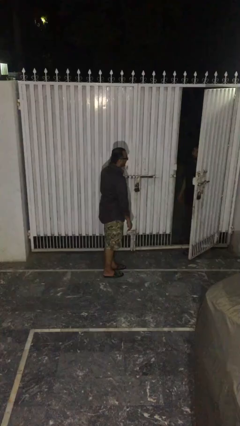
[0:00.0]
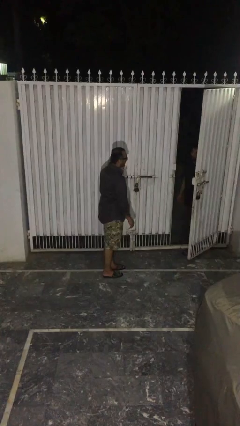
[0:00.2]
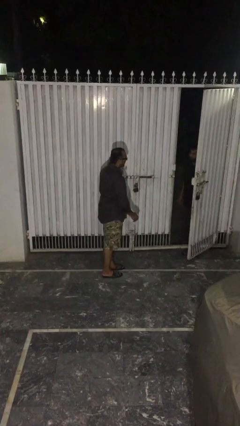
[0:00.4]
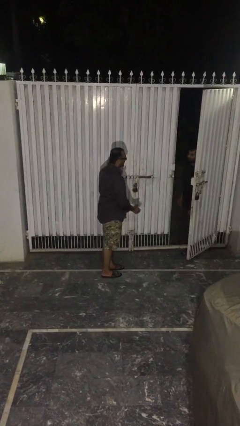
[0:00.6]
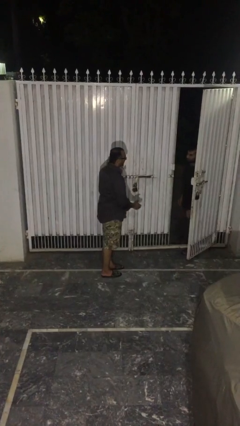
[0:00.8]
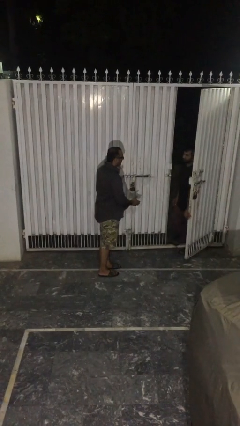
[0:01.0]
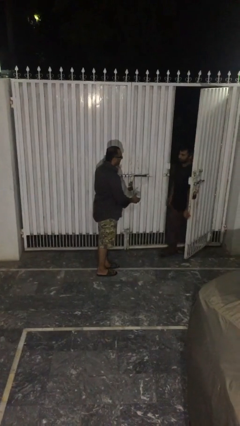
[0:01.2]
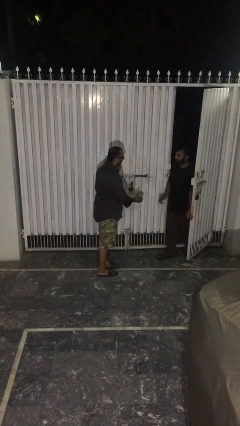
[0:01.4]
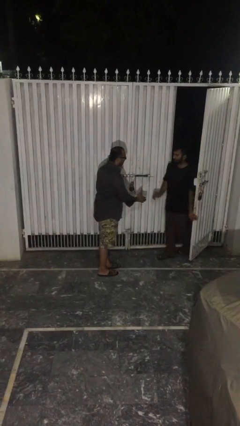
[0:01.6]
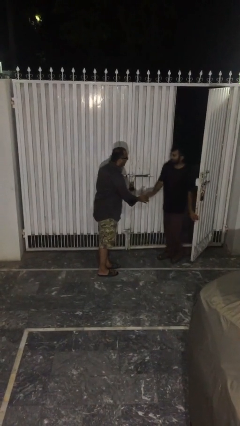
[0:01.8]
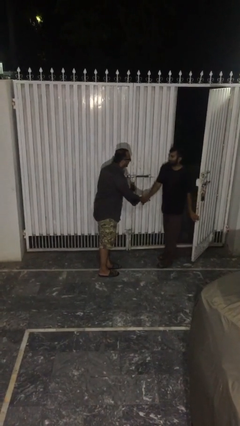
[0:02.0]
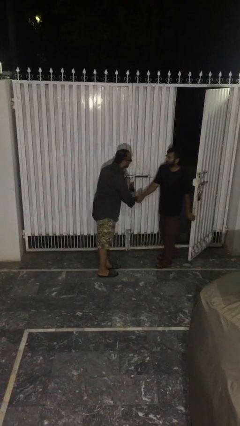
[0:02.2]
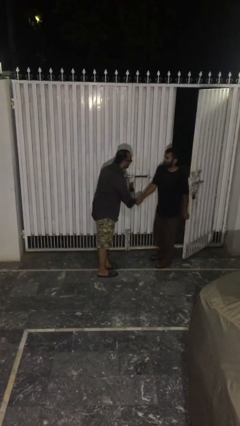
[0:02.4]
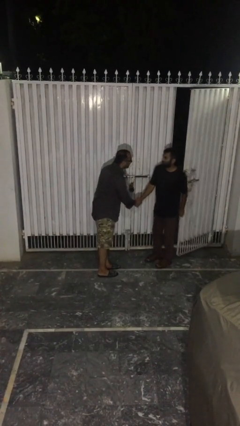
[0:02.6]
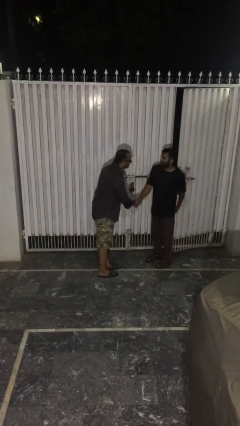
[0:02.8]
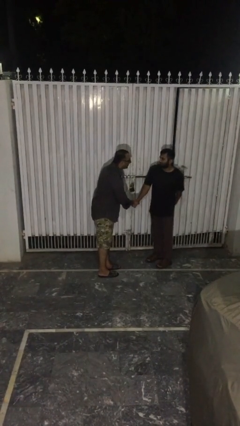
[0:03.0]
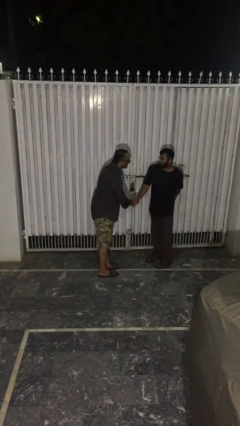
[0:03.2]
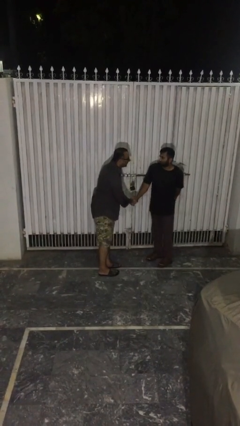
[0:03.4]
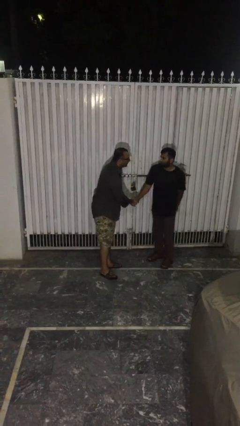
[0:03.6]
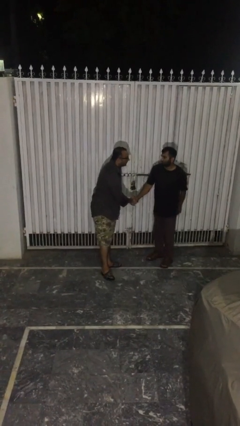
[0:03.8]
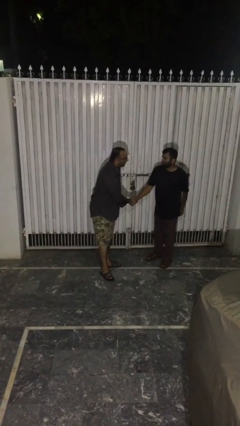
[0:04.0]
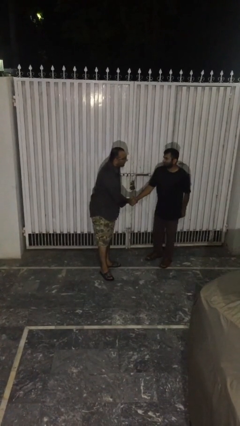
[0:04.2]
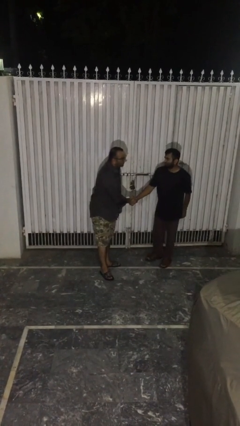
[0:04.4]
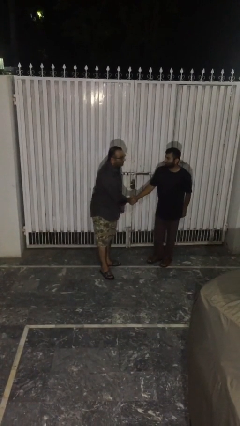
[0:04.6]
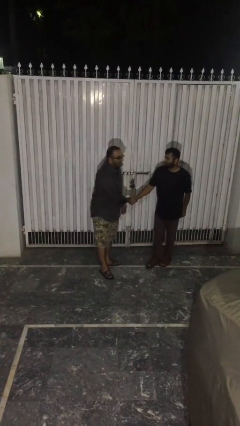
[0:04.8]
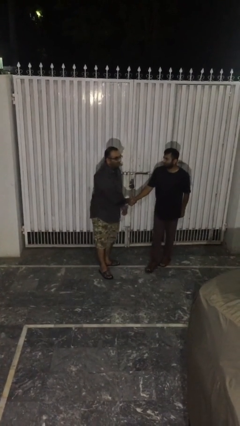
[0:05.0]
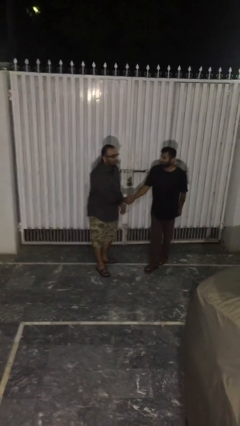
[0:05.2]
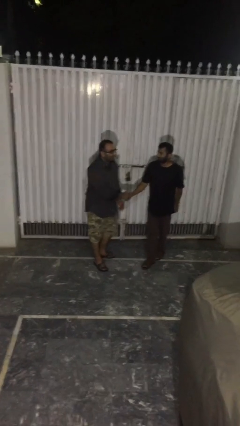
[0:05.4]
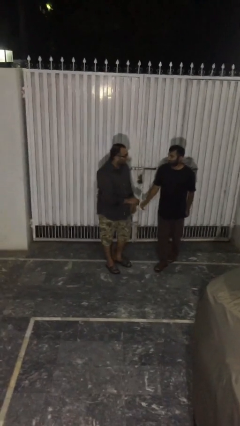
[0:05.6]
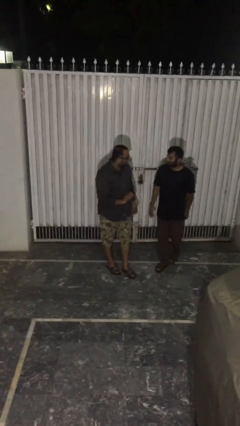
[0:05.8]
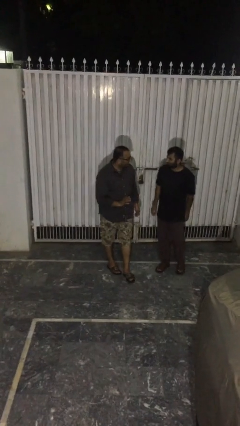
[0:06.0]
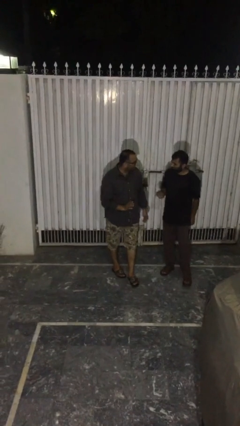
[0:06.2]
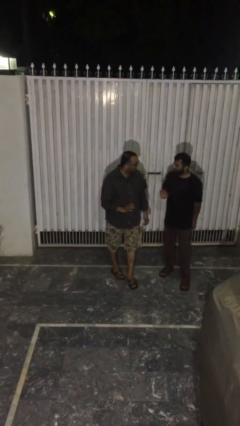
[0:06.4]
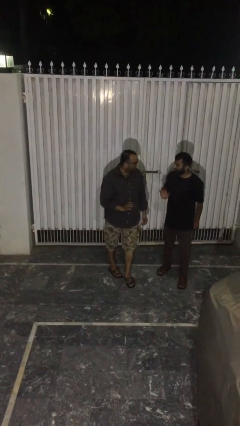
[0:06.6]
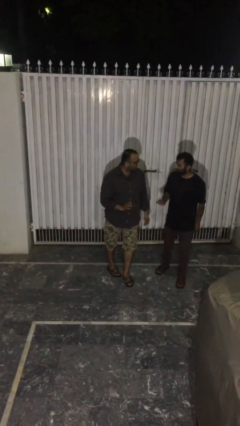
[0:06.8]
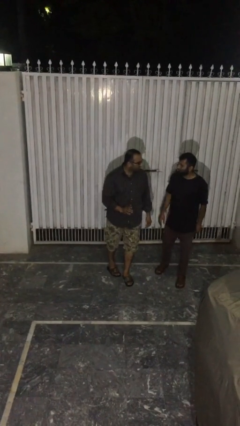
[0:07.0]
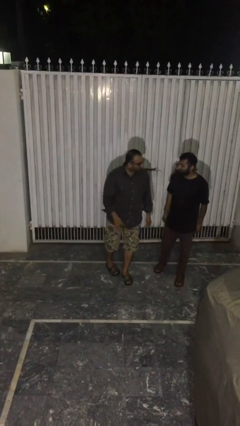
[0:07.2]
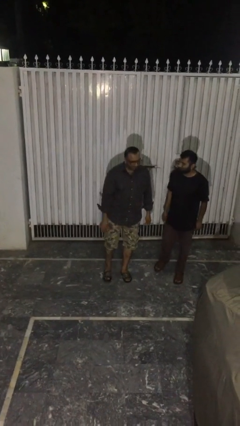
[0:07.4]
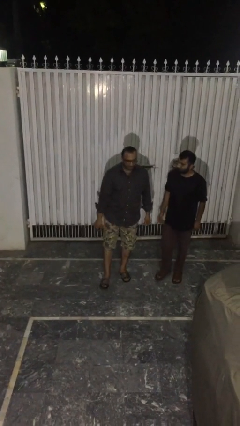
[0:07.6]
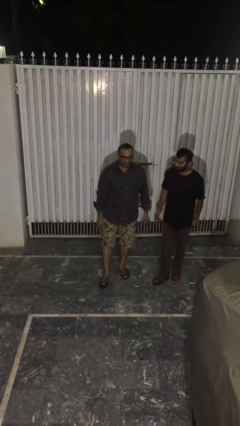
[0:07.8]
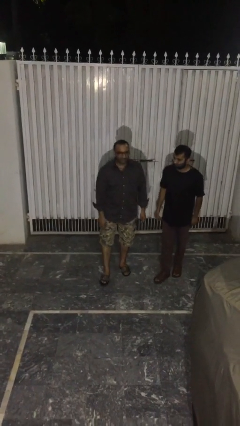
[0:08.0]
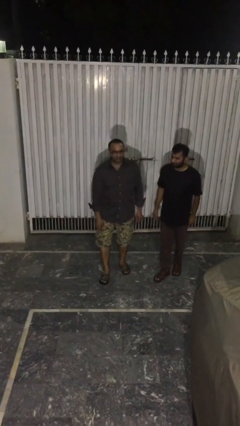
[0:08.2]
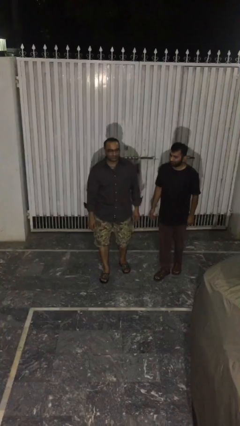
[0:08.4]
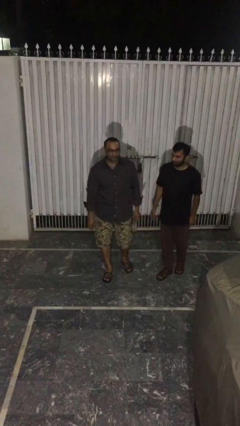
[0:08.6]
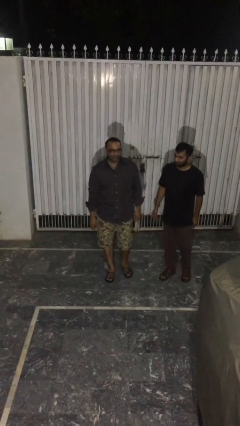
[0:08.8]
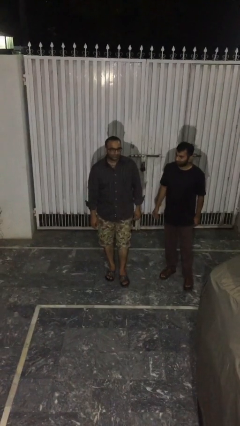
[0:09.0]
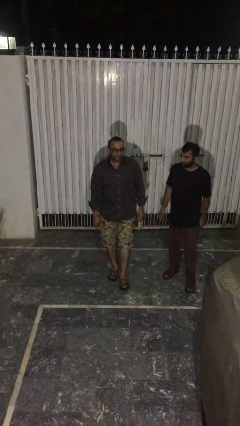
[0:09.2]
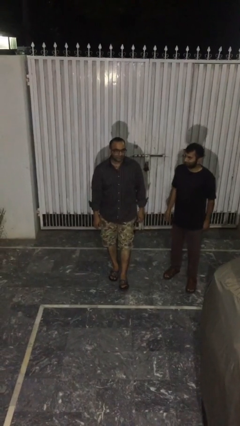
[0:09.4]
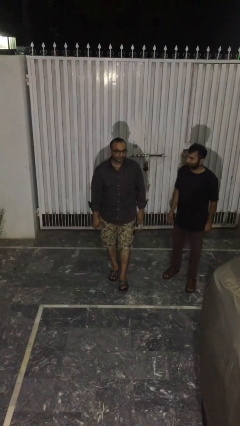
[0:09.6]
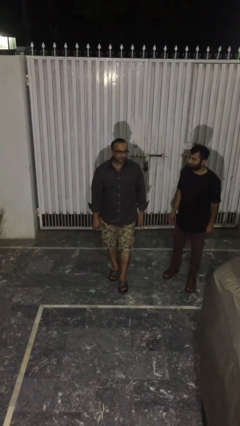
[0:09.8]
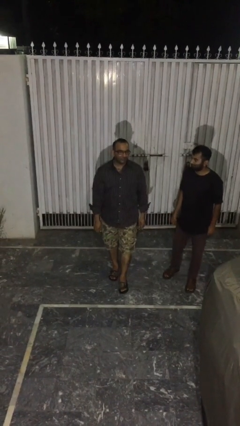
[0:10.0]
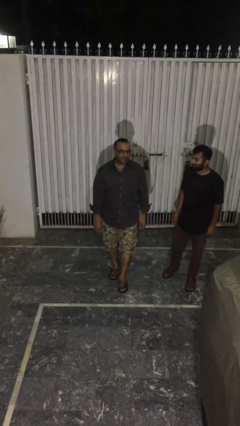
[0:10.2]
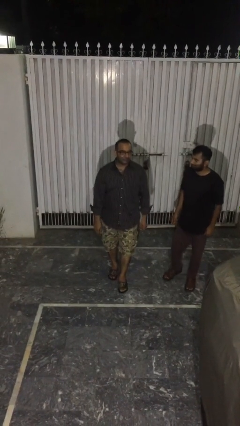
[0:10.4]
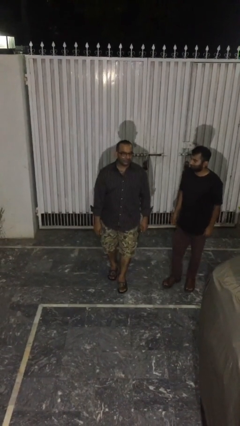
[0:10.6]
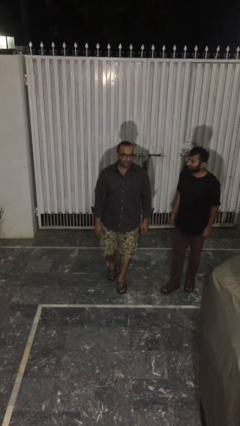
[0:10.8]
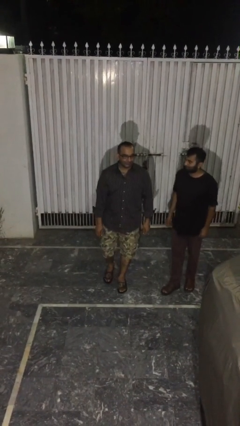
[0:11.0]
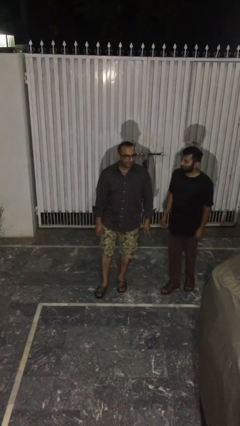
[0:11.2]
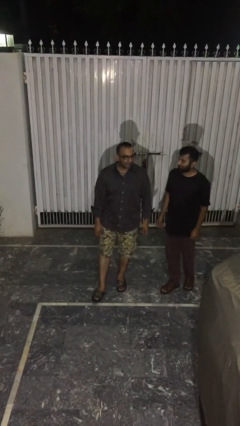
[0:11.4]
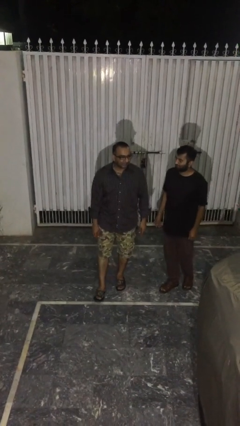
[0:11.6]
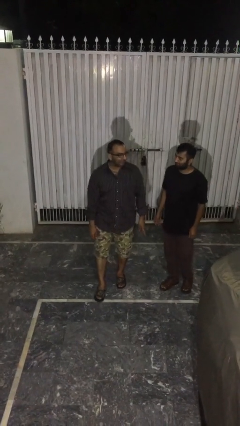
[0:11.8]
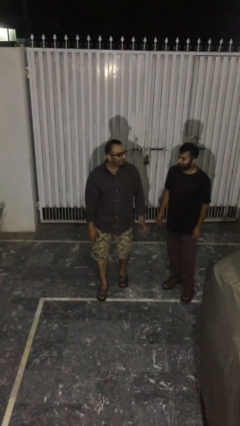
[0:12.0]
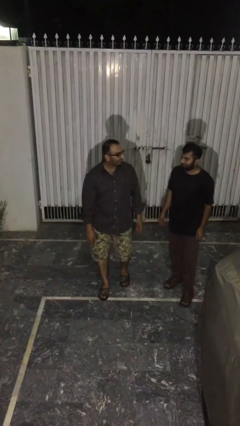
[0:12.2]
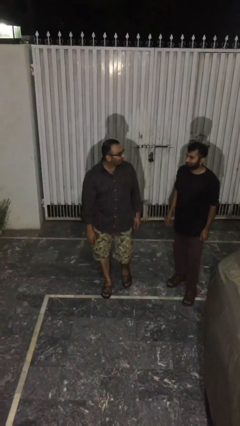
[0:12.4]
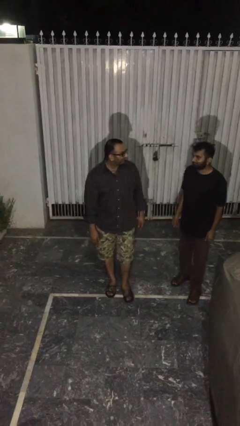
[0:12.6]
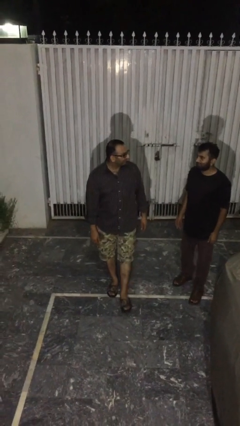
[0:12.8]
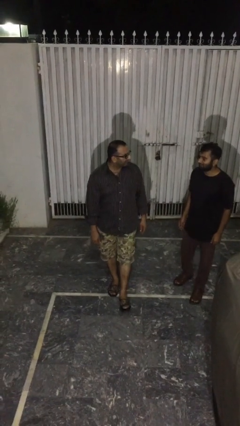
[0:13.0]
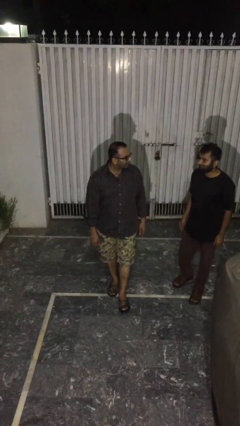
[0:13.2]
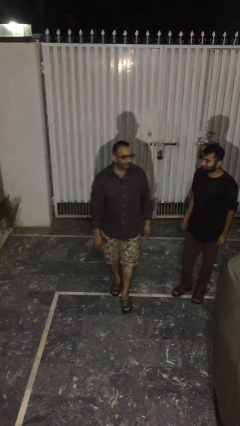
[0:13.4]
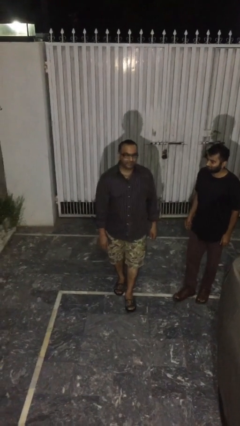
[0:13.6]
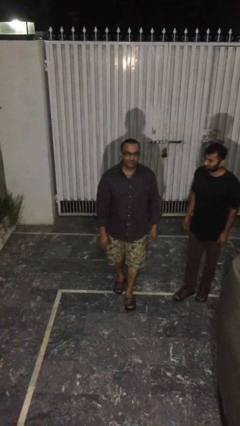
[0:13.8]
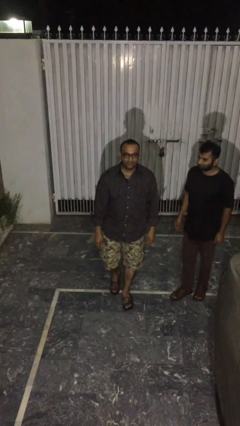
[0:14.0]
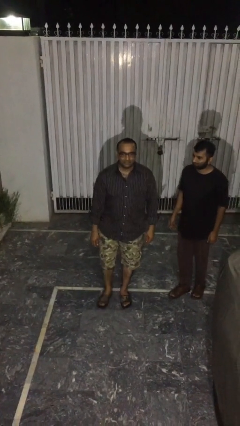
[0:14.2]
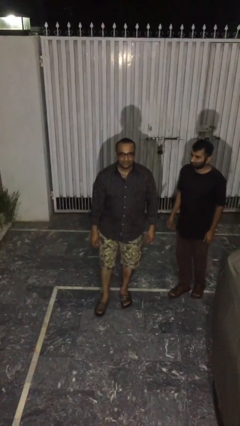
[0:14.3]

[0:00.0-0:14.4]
person shakes hand

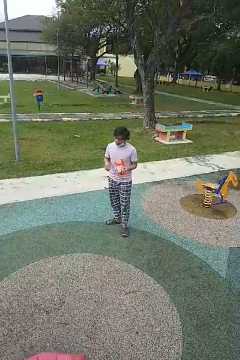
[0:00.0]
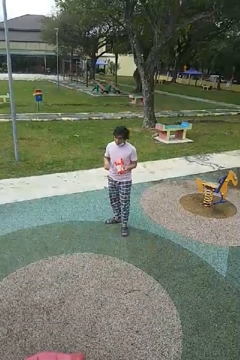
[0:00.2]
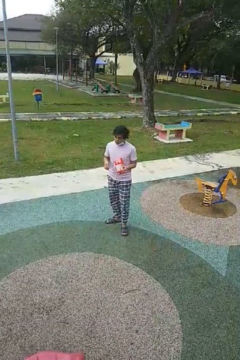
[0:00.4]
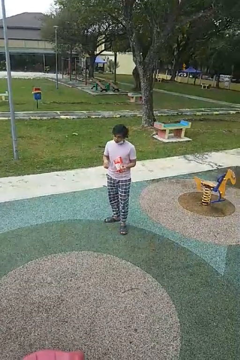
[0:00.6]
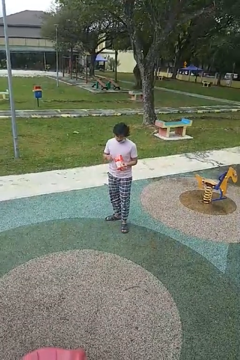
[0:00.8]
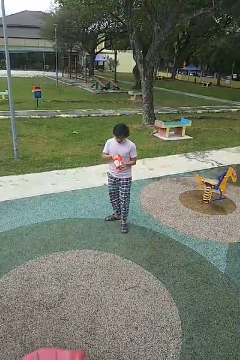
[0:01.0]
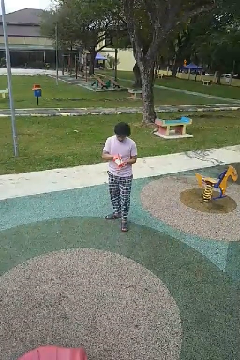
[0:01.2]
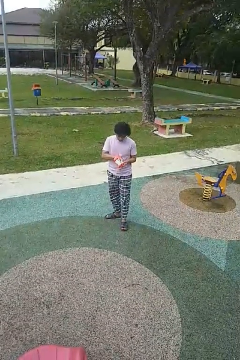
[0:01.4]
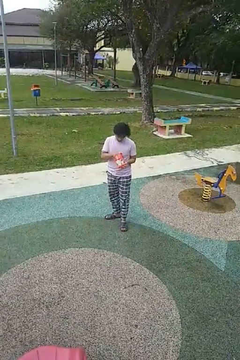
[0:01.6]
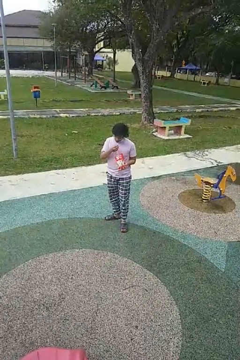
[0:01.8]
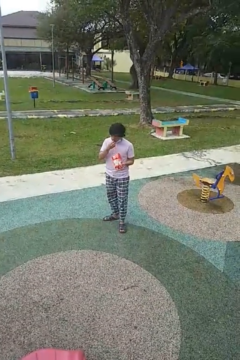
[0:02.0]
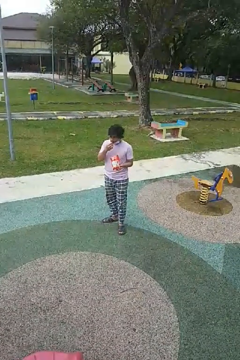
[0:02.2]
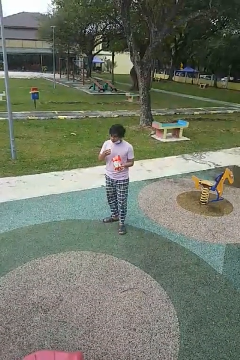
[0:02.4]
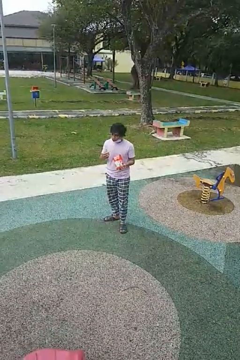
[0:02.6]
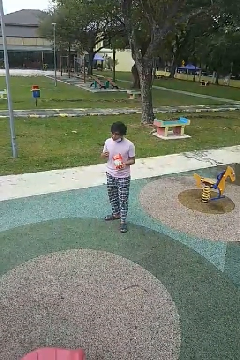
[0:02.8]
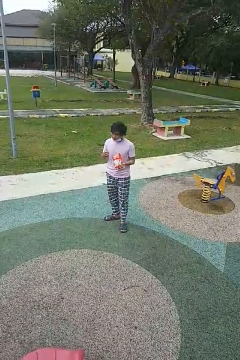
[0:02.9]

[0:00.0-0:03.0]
person eats snack from bag

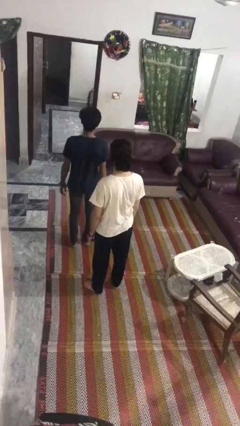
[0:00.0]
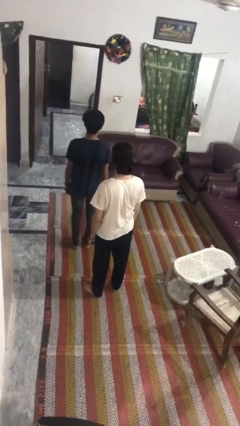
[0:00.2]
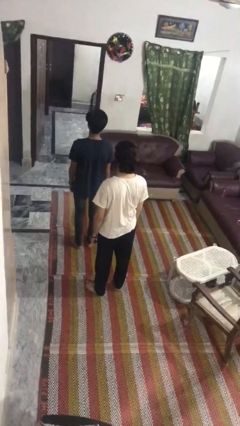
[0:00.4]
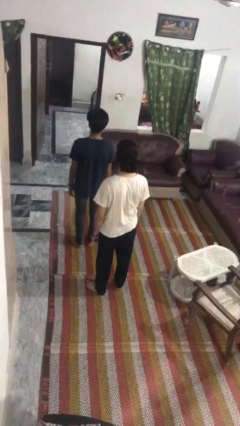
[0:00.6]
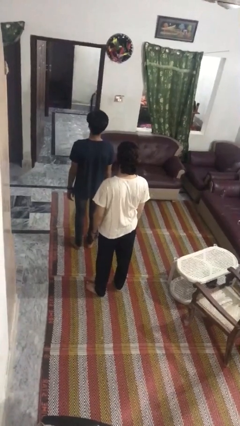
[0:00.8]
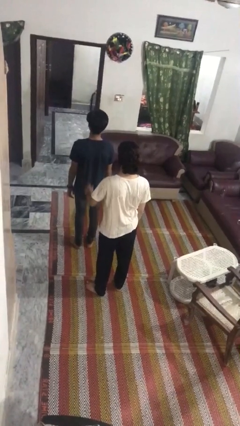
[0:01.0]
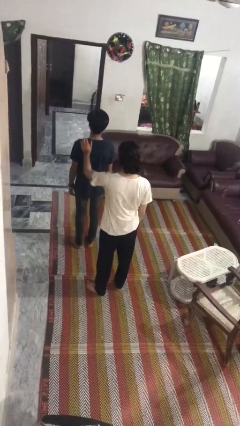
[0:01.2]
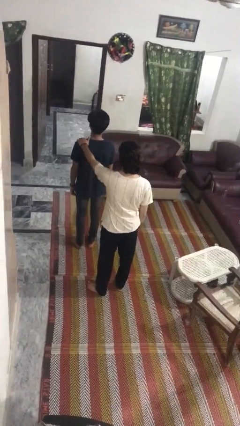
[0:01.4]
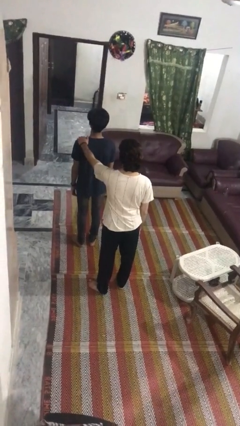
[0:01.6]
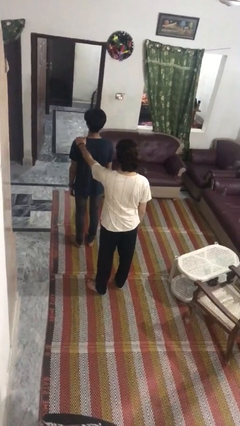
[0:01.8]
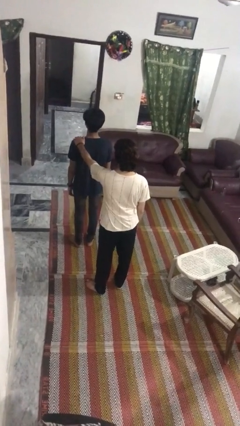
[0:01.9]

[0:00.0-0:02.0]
person grabs person by shoulder
